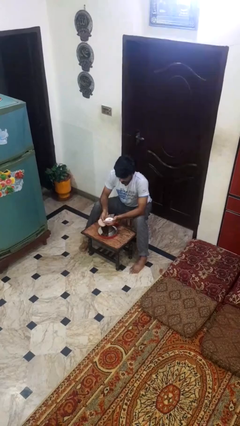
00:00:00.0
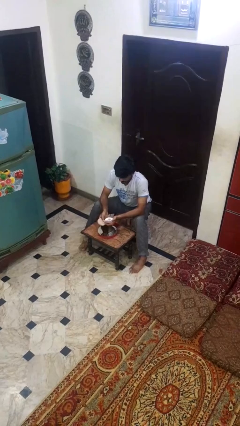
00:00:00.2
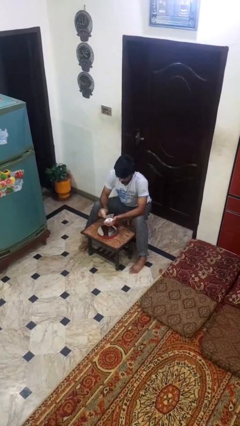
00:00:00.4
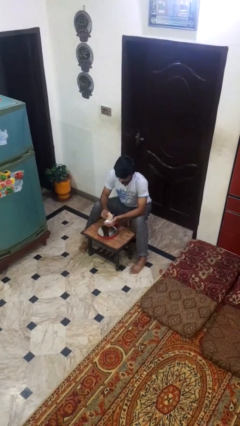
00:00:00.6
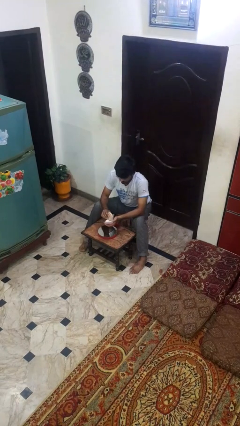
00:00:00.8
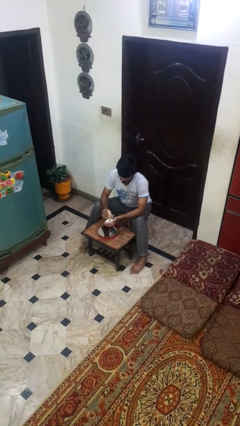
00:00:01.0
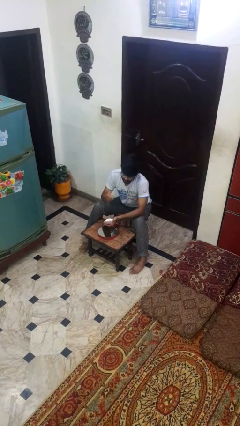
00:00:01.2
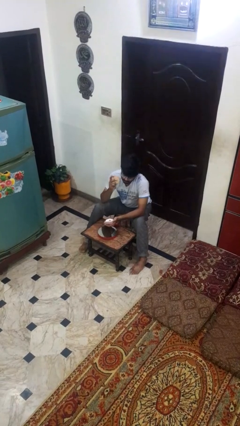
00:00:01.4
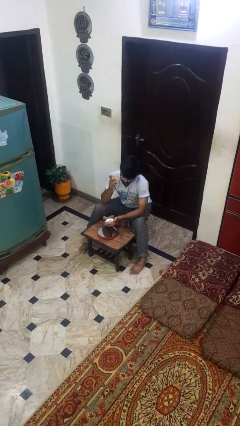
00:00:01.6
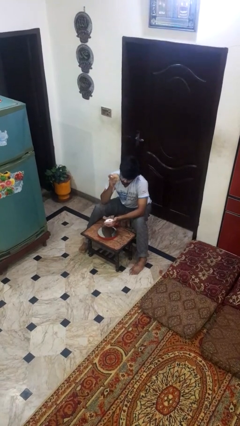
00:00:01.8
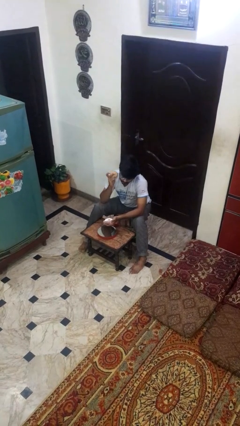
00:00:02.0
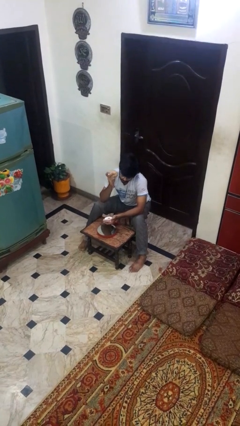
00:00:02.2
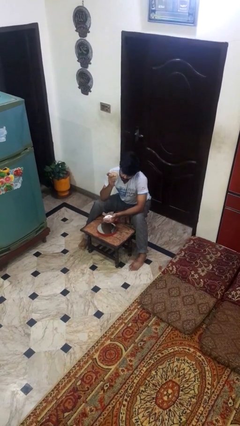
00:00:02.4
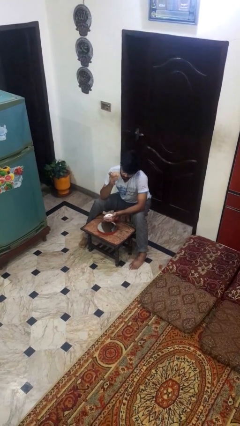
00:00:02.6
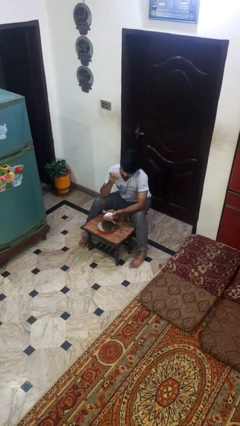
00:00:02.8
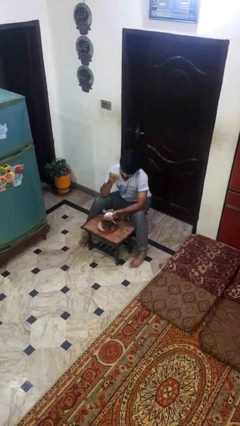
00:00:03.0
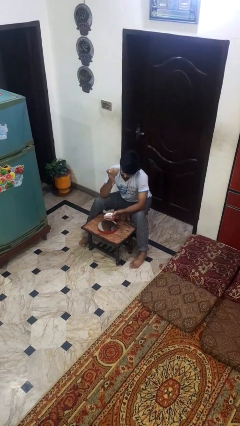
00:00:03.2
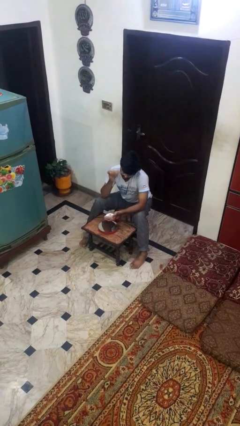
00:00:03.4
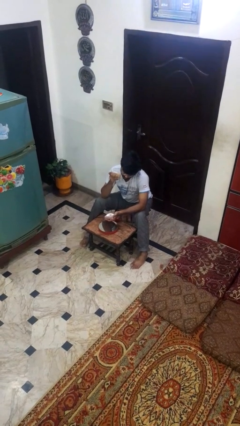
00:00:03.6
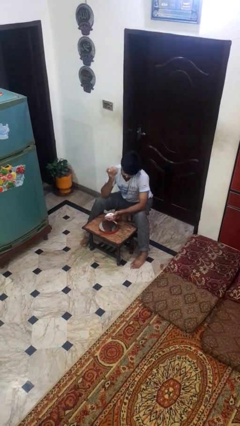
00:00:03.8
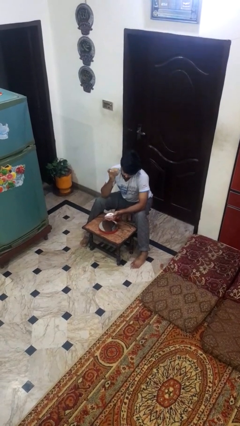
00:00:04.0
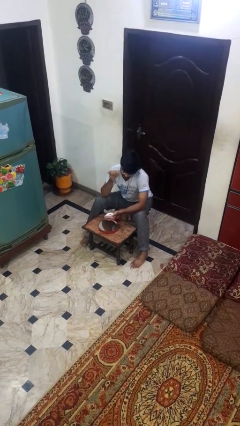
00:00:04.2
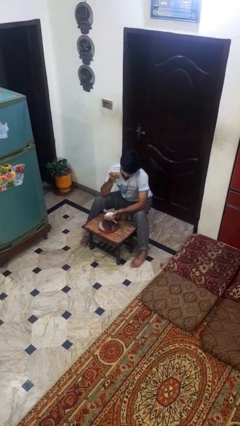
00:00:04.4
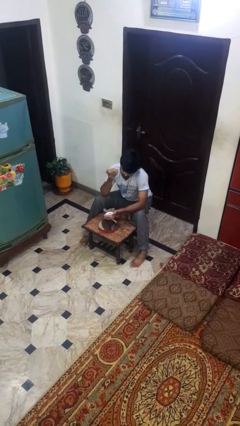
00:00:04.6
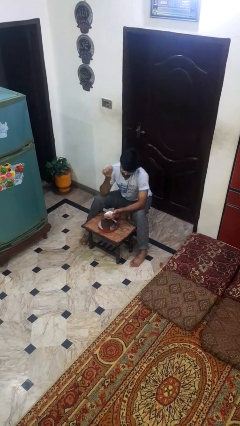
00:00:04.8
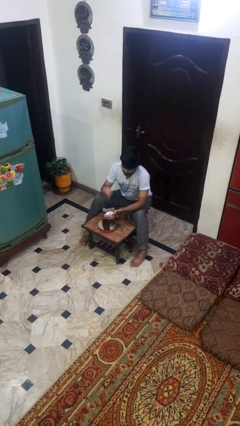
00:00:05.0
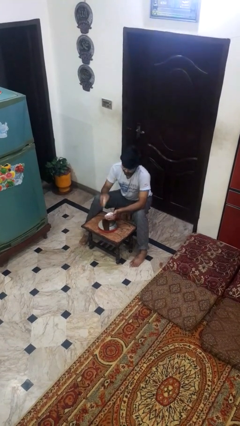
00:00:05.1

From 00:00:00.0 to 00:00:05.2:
person applies foundation makeup

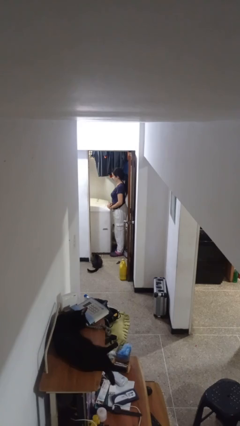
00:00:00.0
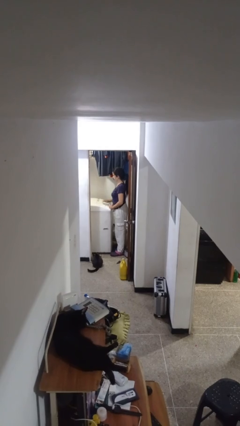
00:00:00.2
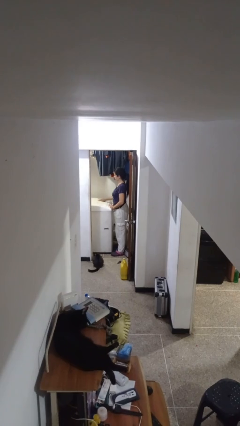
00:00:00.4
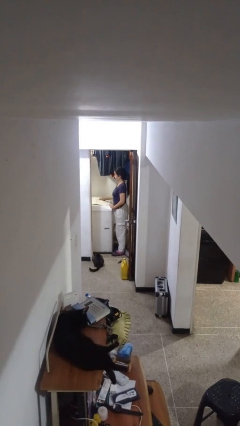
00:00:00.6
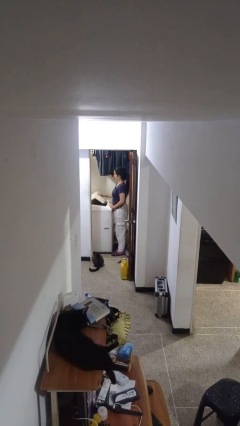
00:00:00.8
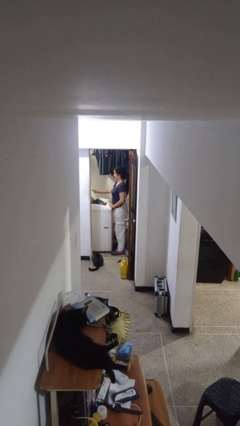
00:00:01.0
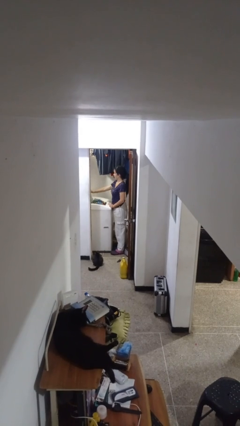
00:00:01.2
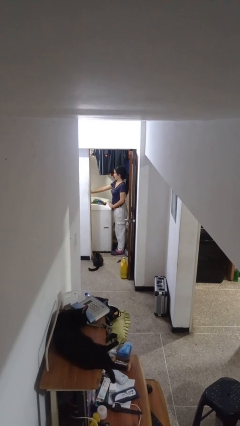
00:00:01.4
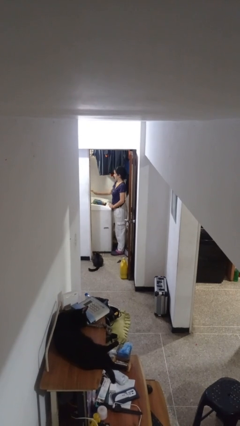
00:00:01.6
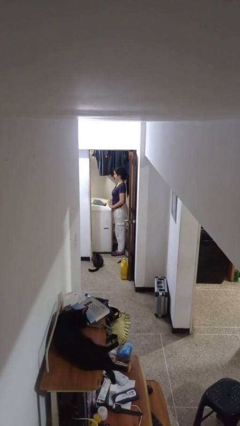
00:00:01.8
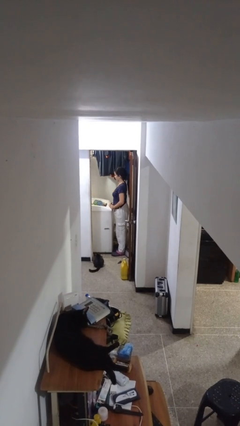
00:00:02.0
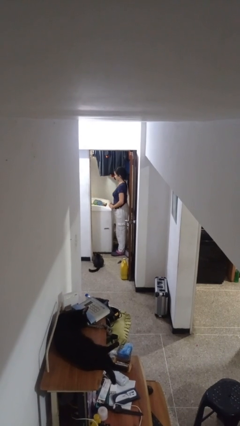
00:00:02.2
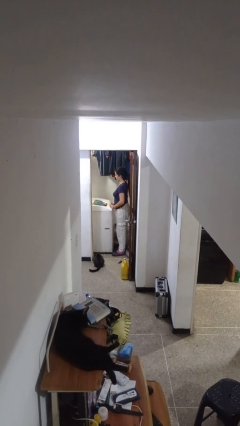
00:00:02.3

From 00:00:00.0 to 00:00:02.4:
person opens clothes washer

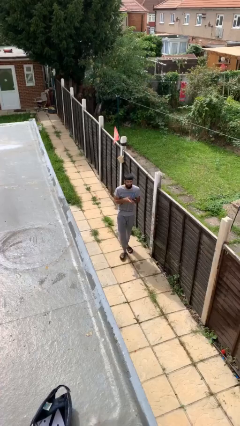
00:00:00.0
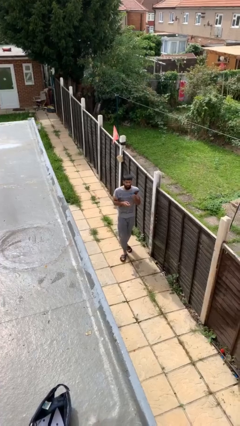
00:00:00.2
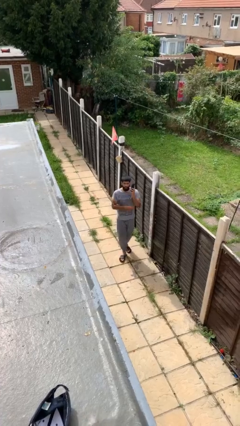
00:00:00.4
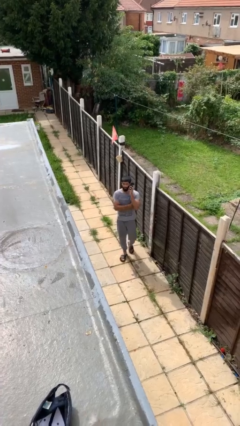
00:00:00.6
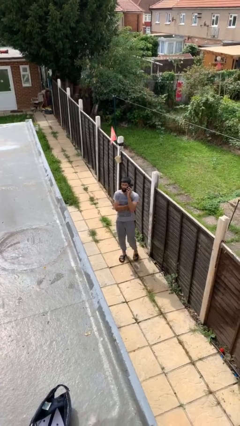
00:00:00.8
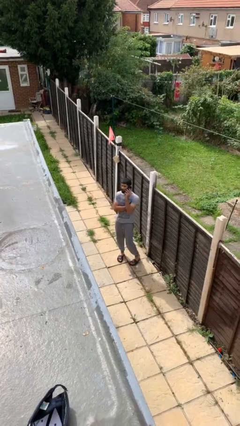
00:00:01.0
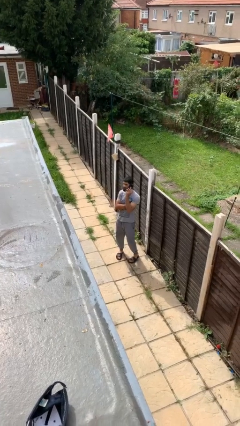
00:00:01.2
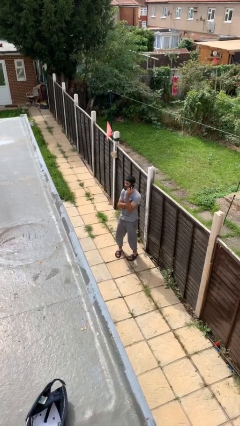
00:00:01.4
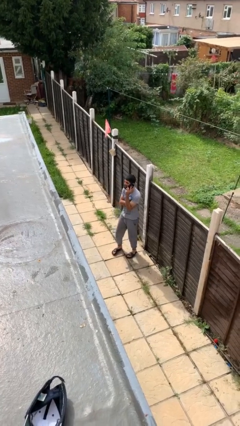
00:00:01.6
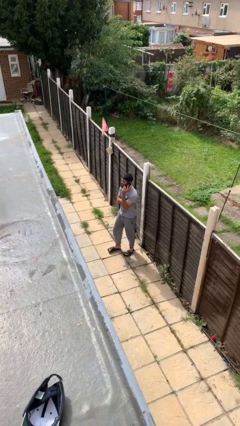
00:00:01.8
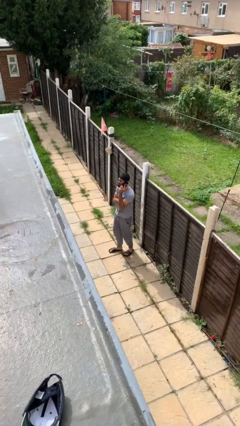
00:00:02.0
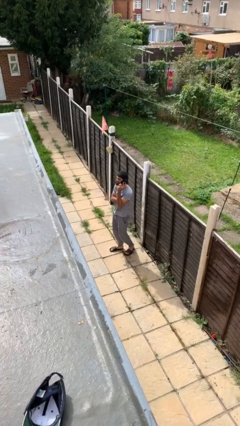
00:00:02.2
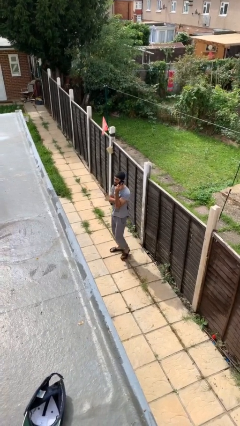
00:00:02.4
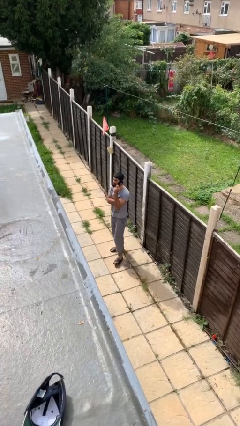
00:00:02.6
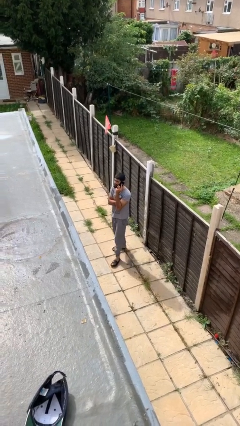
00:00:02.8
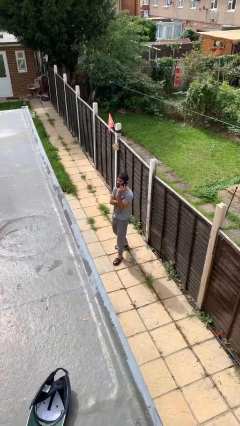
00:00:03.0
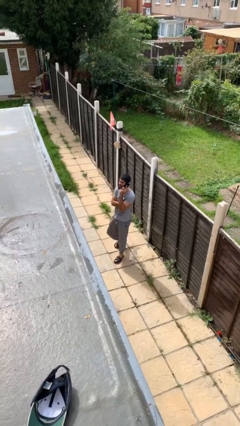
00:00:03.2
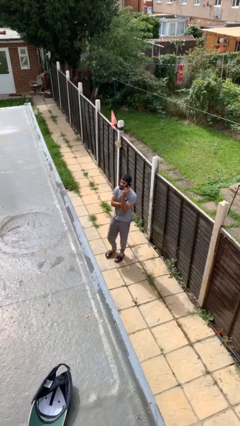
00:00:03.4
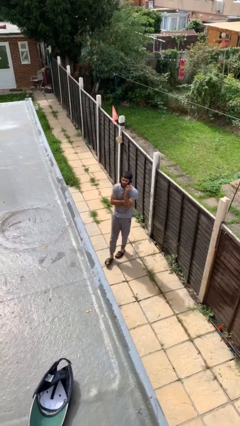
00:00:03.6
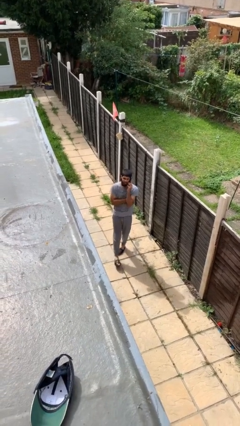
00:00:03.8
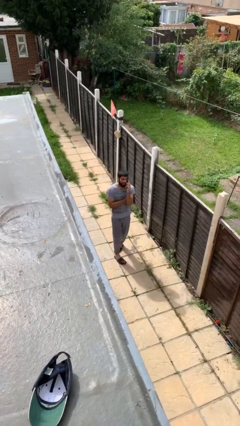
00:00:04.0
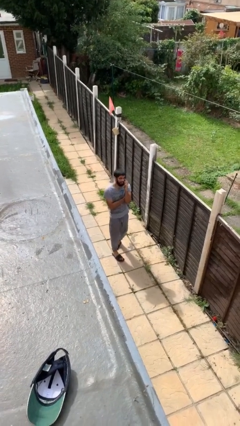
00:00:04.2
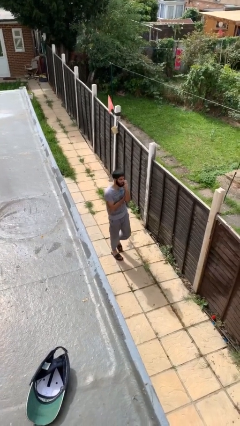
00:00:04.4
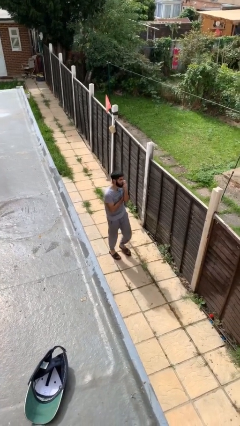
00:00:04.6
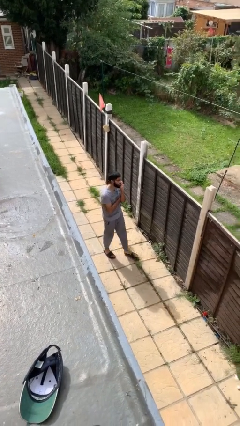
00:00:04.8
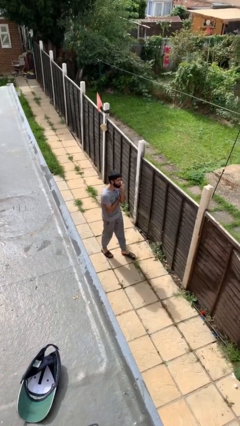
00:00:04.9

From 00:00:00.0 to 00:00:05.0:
person talks on phone

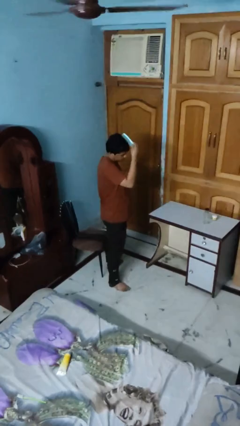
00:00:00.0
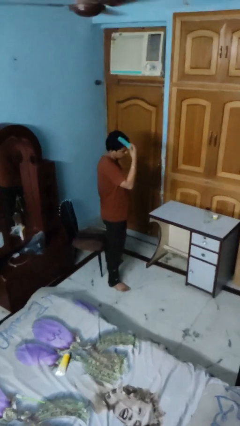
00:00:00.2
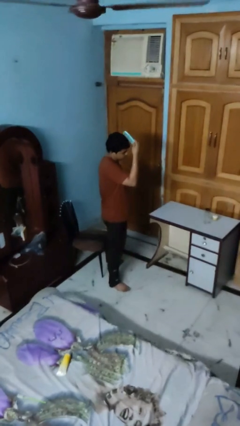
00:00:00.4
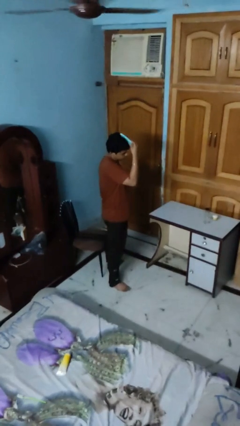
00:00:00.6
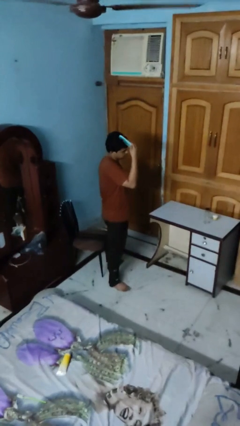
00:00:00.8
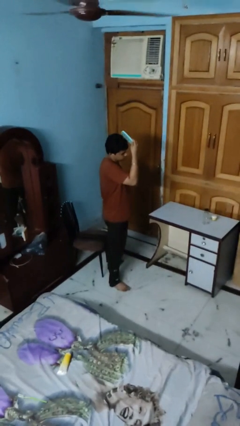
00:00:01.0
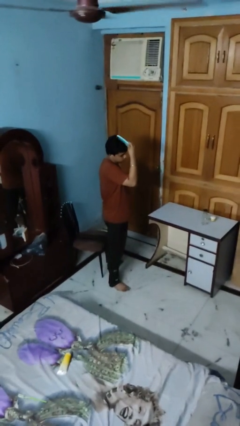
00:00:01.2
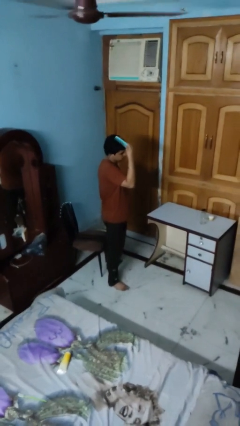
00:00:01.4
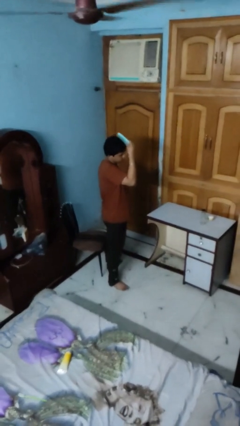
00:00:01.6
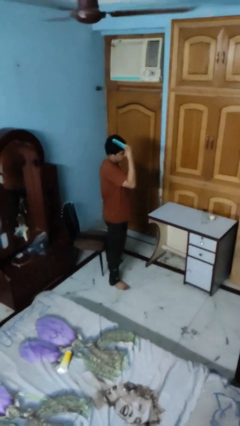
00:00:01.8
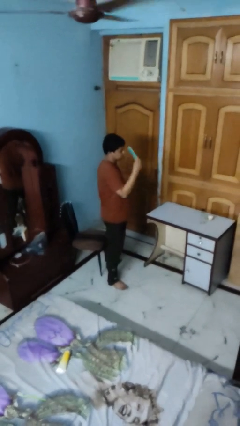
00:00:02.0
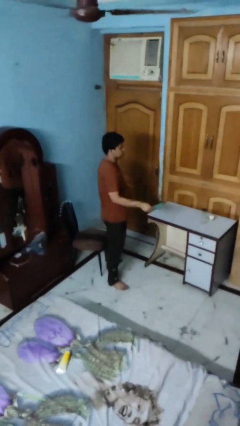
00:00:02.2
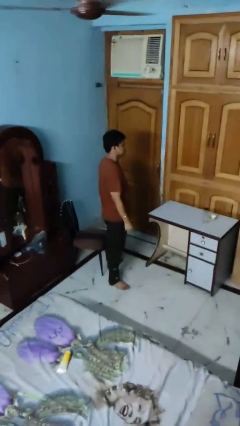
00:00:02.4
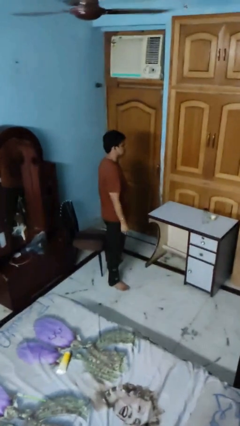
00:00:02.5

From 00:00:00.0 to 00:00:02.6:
person brushes hair

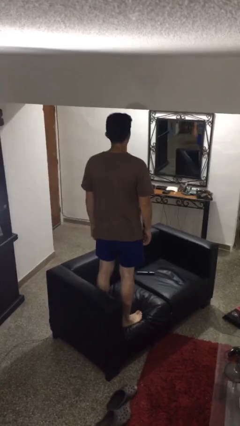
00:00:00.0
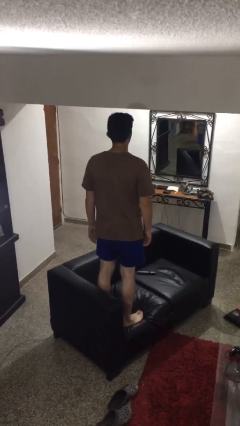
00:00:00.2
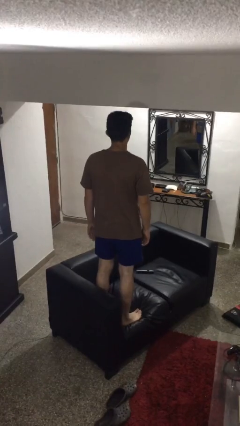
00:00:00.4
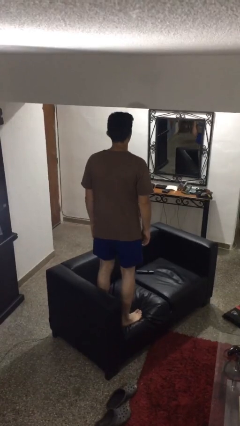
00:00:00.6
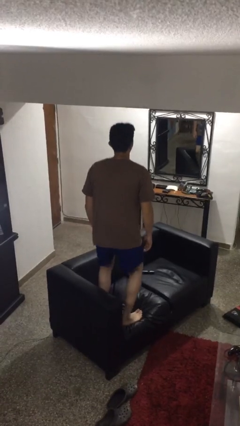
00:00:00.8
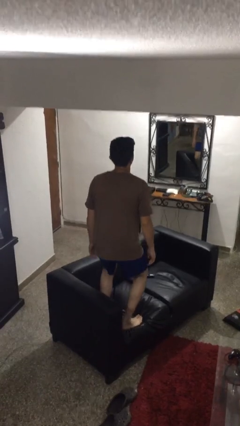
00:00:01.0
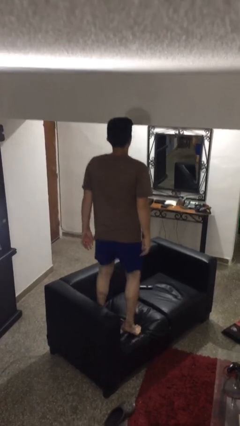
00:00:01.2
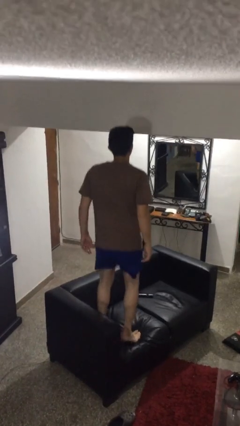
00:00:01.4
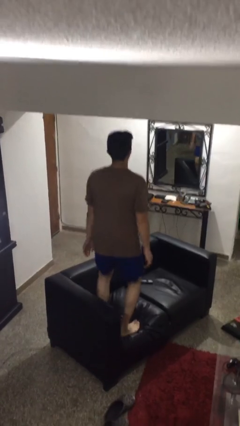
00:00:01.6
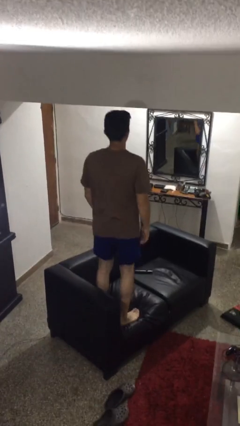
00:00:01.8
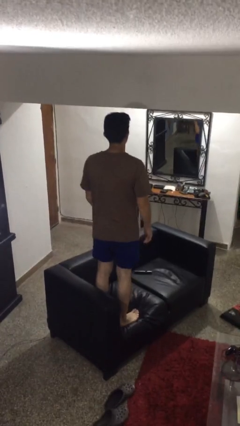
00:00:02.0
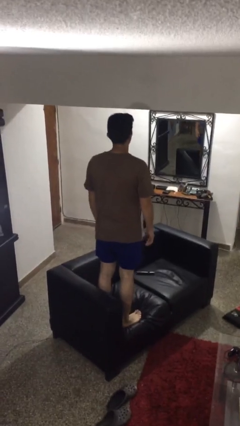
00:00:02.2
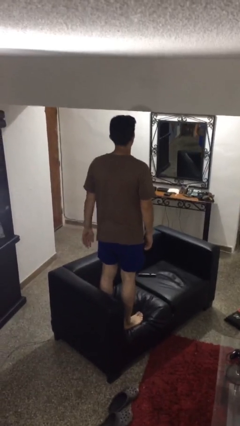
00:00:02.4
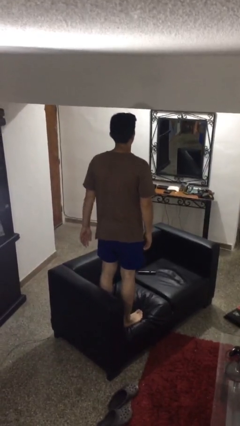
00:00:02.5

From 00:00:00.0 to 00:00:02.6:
person jumps on couch
